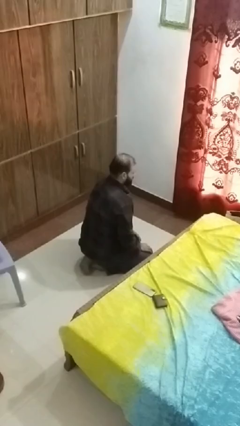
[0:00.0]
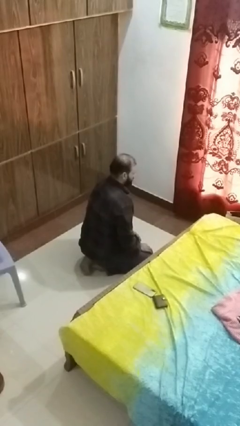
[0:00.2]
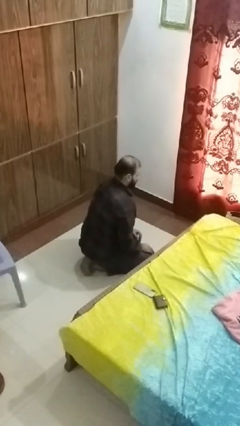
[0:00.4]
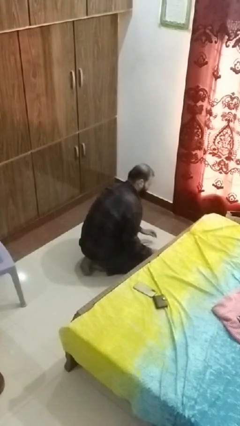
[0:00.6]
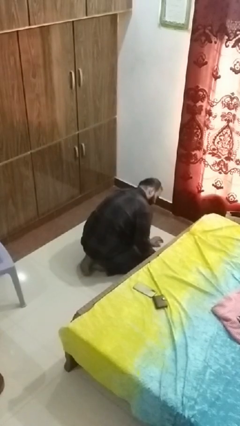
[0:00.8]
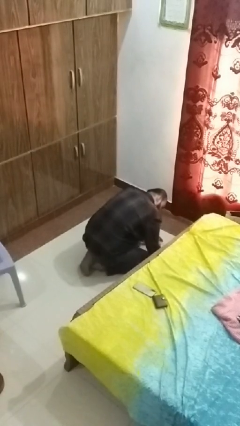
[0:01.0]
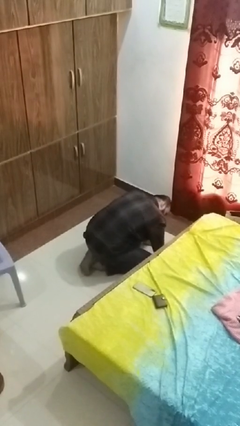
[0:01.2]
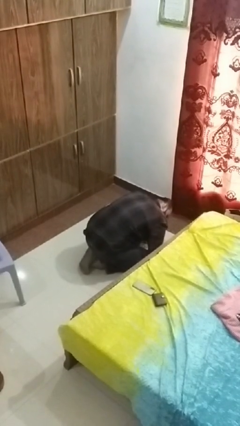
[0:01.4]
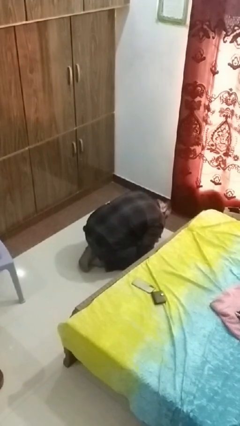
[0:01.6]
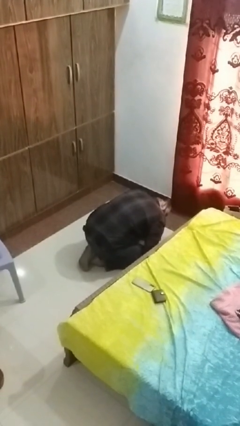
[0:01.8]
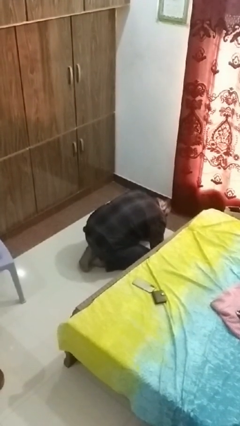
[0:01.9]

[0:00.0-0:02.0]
person searches under bed

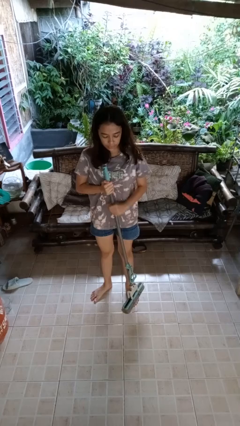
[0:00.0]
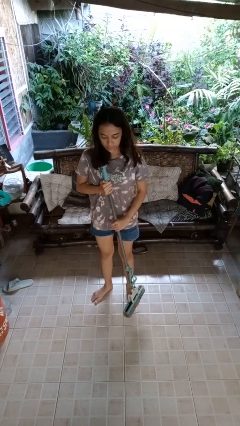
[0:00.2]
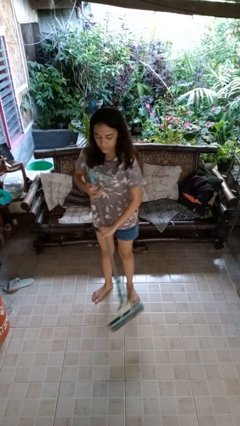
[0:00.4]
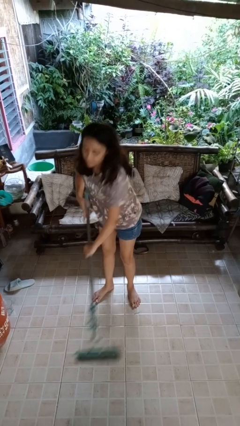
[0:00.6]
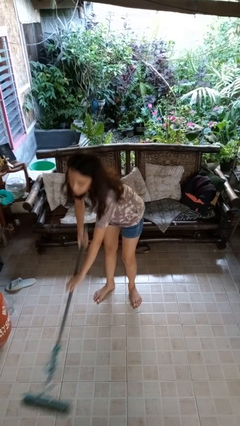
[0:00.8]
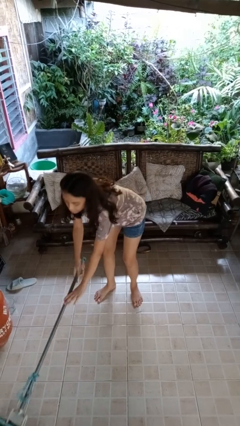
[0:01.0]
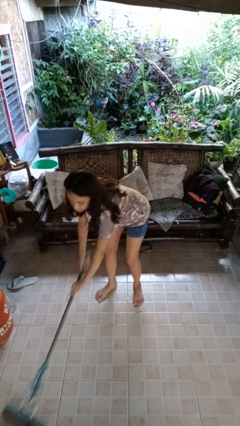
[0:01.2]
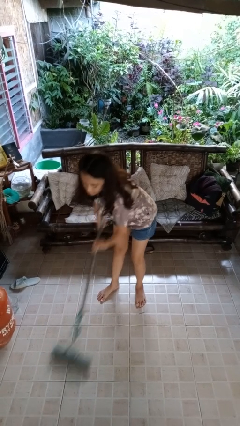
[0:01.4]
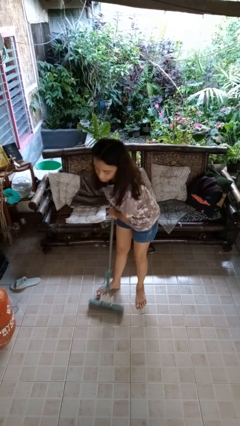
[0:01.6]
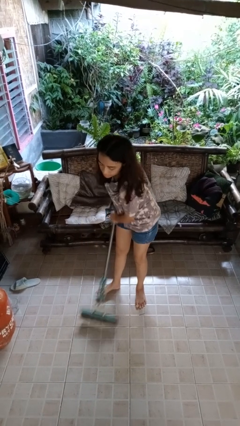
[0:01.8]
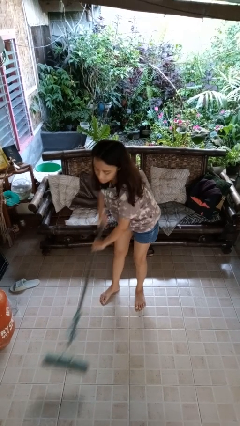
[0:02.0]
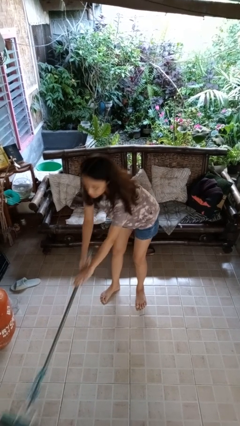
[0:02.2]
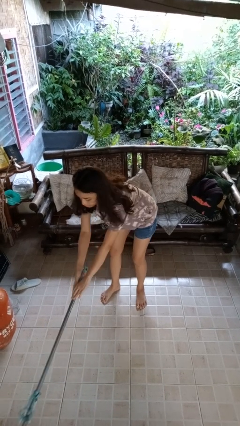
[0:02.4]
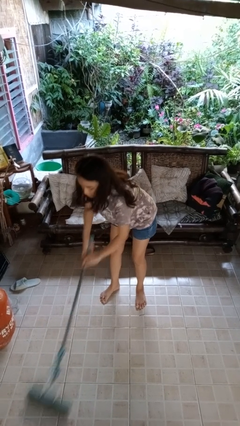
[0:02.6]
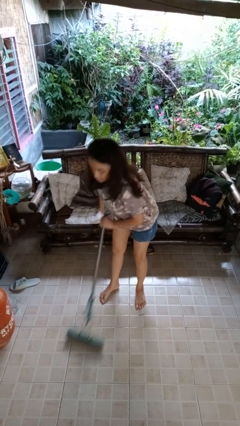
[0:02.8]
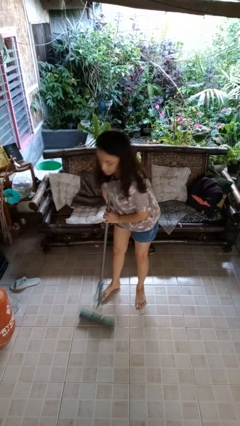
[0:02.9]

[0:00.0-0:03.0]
person mops

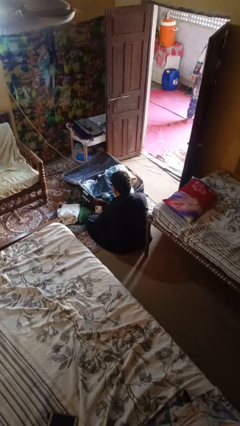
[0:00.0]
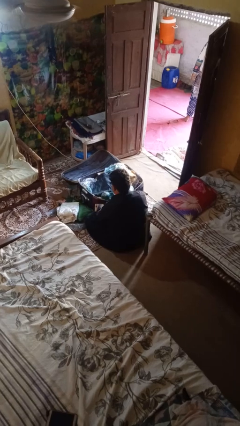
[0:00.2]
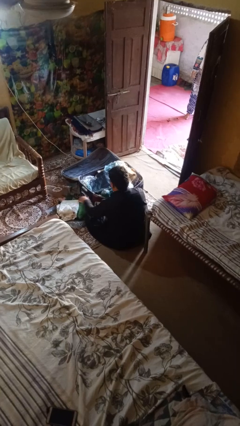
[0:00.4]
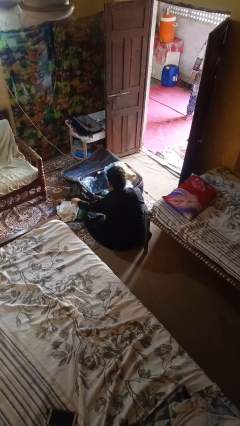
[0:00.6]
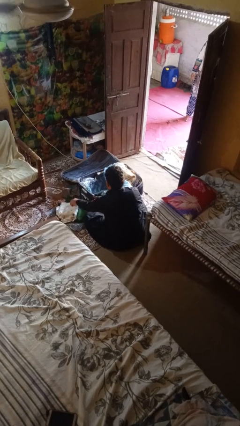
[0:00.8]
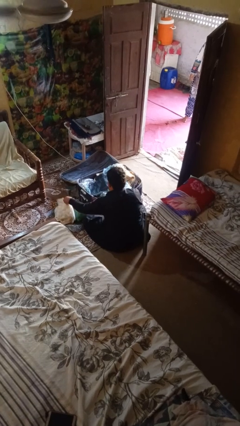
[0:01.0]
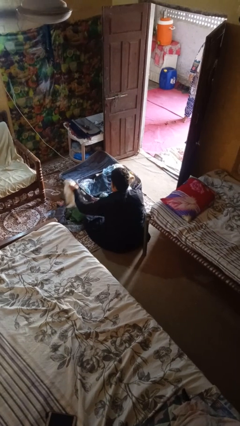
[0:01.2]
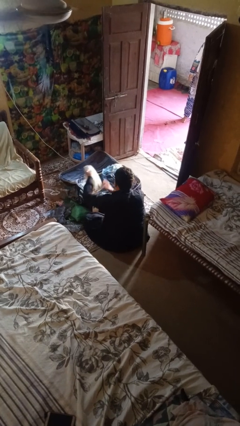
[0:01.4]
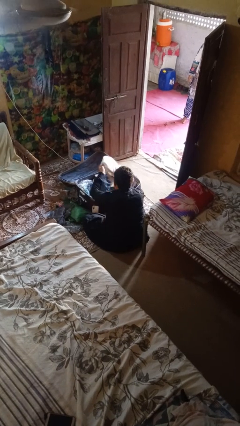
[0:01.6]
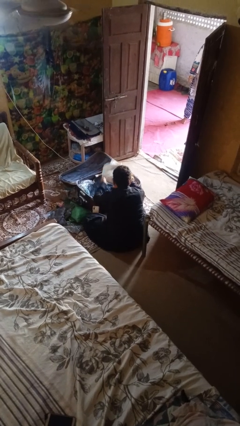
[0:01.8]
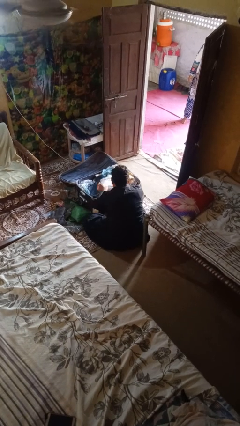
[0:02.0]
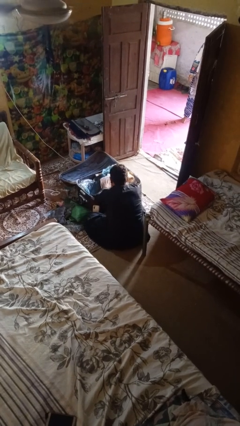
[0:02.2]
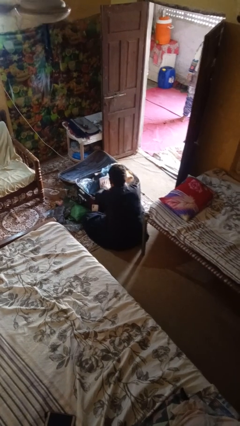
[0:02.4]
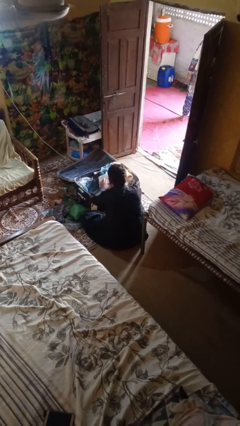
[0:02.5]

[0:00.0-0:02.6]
person loads clothes into suitcase

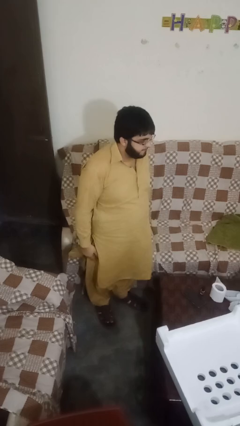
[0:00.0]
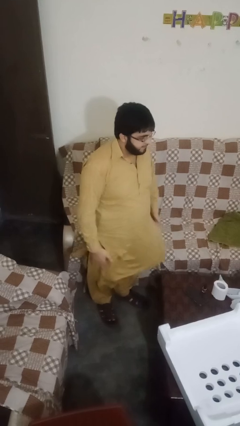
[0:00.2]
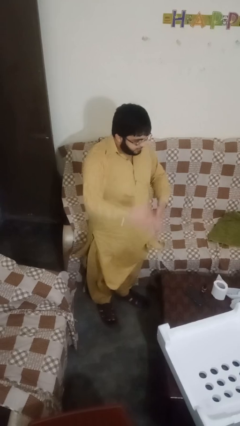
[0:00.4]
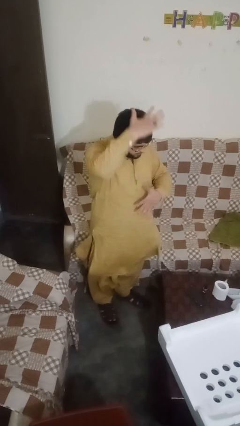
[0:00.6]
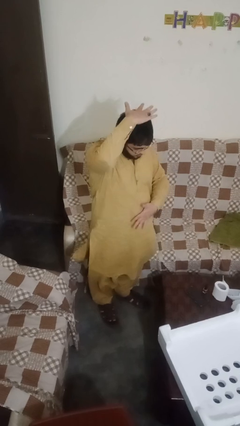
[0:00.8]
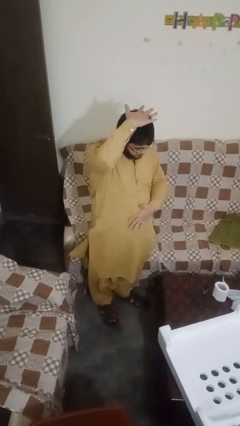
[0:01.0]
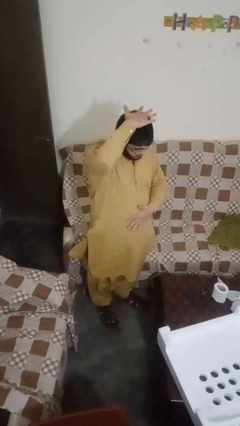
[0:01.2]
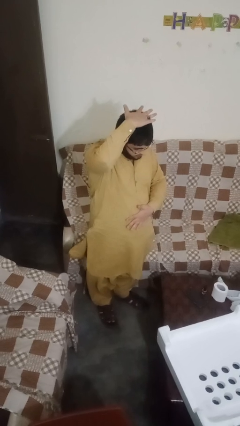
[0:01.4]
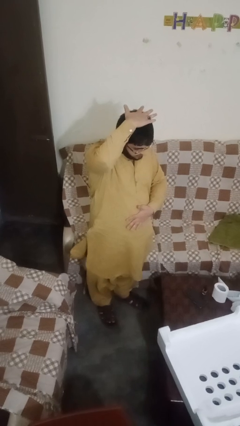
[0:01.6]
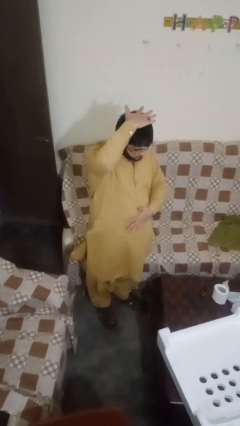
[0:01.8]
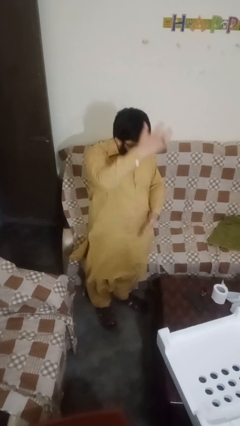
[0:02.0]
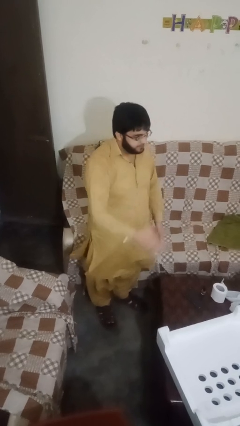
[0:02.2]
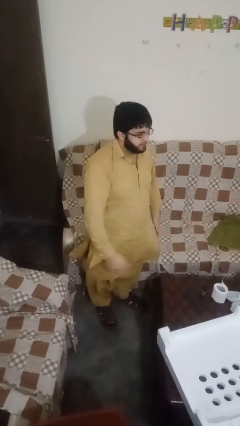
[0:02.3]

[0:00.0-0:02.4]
person pats head

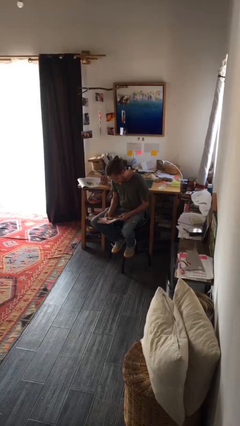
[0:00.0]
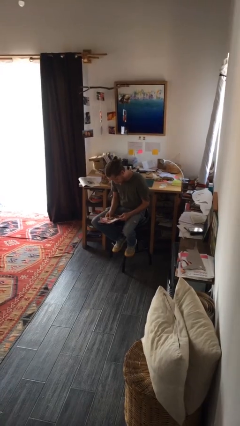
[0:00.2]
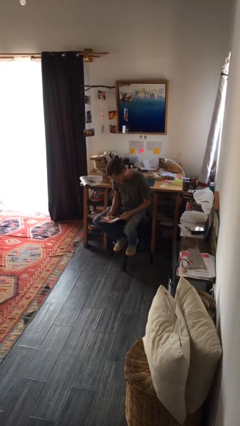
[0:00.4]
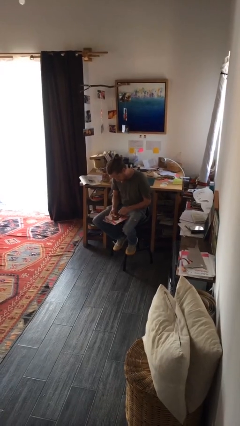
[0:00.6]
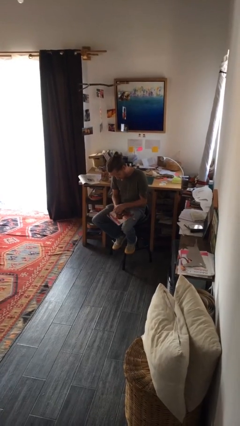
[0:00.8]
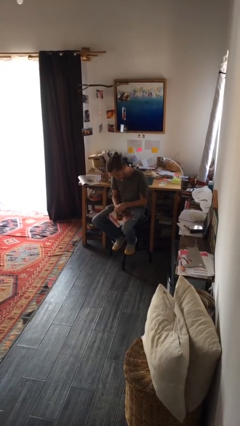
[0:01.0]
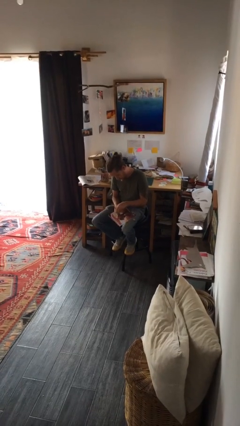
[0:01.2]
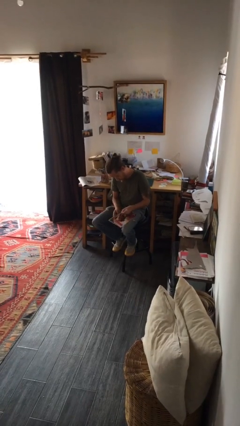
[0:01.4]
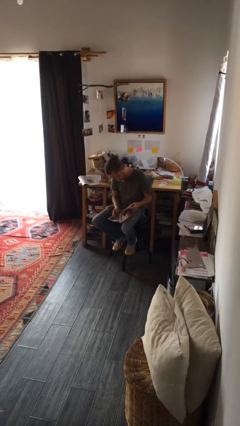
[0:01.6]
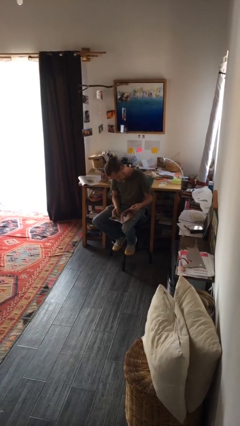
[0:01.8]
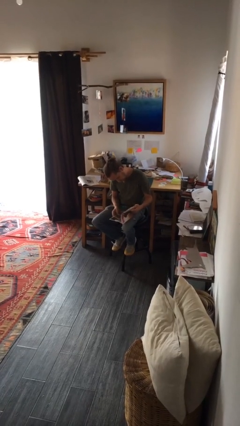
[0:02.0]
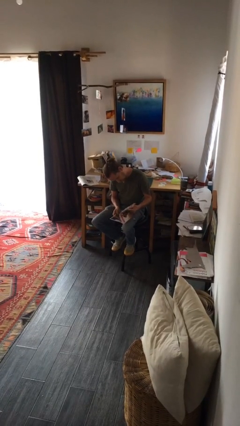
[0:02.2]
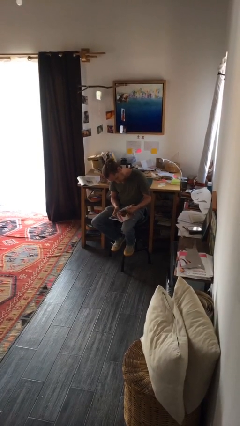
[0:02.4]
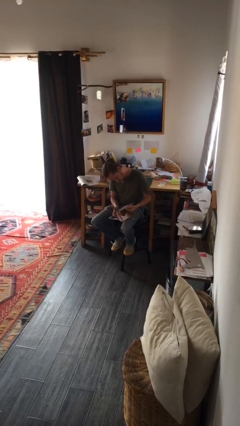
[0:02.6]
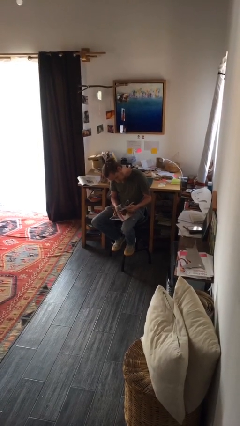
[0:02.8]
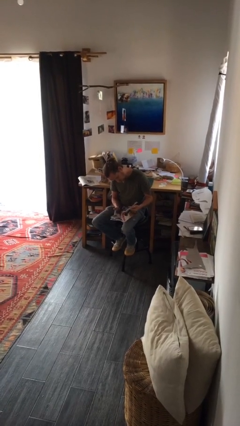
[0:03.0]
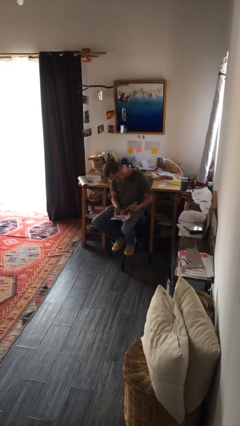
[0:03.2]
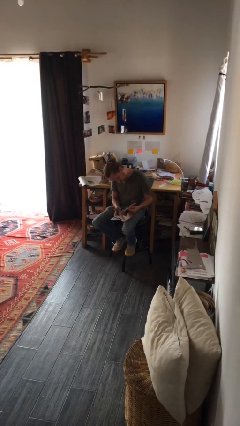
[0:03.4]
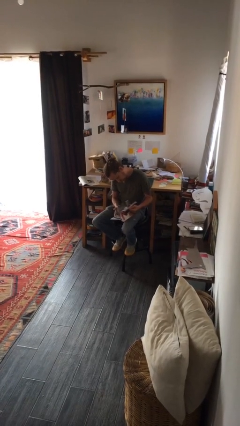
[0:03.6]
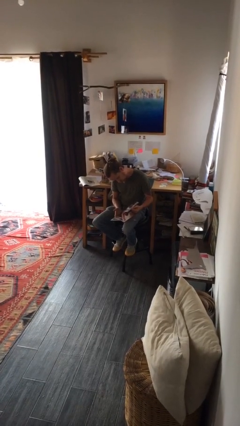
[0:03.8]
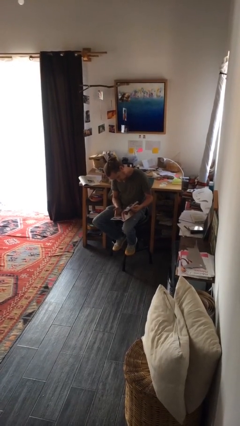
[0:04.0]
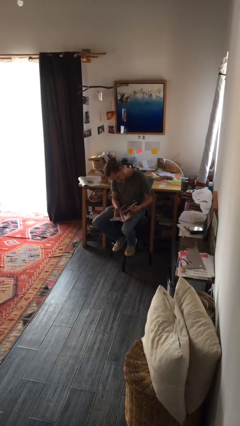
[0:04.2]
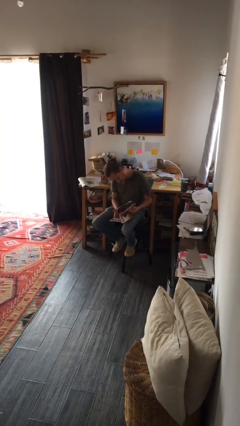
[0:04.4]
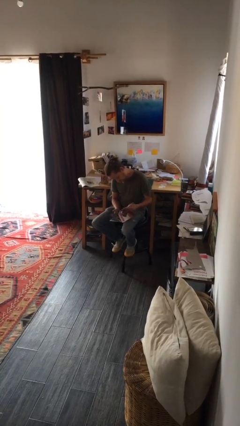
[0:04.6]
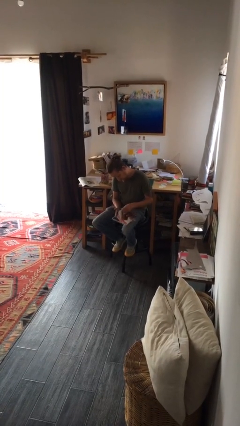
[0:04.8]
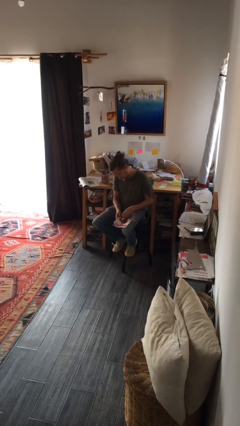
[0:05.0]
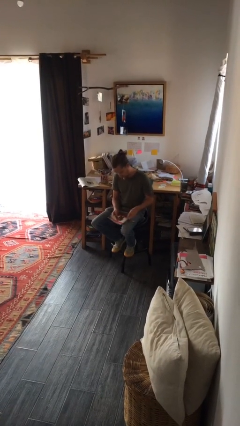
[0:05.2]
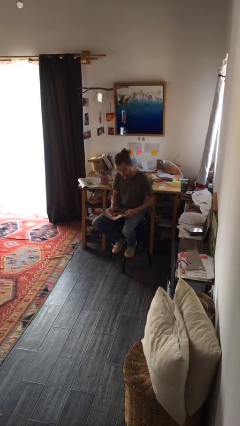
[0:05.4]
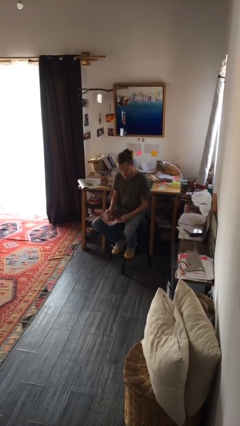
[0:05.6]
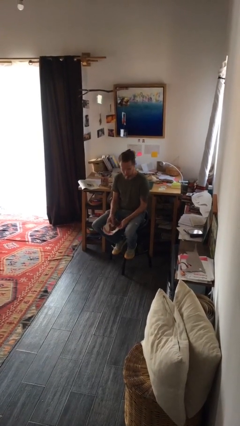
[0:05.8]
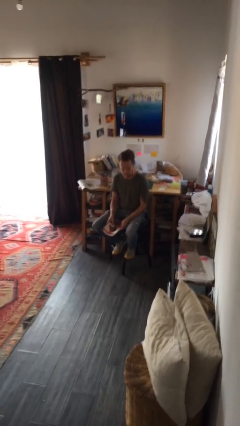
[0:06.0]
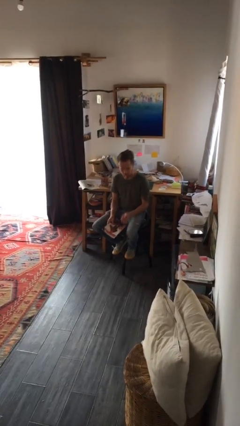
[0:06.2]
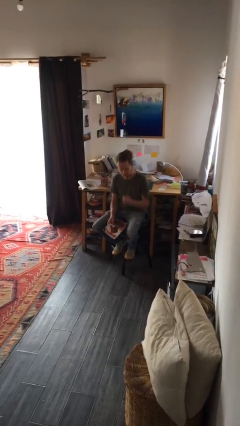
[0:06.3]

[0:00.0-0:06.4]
person reads magazine

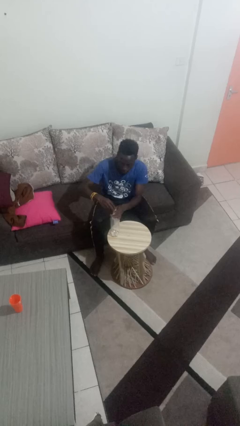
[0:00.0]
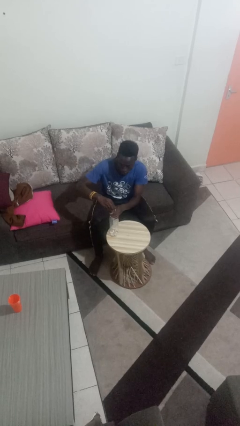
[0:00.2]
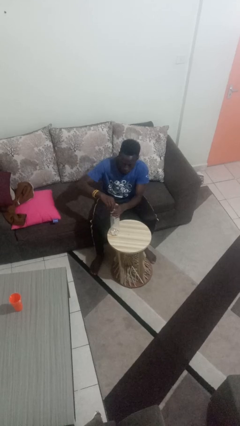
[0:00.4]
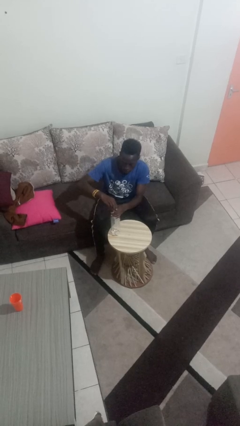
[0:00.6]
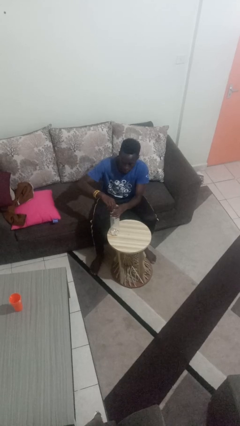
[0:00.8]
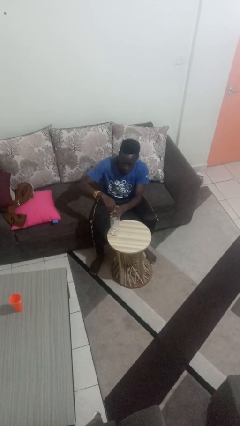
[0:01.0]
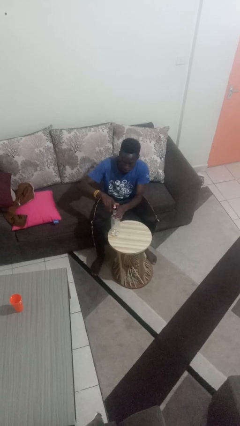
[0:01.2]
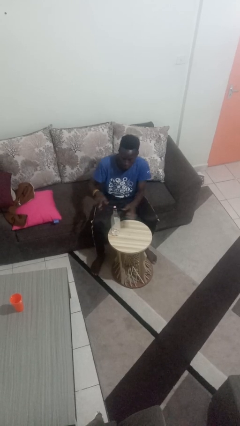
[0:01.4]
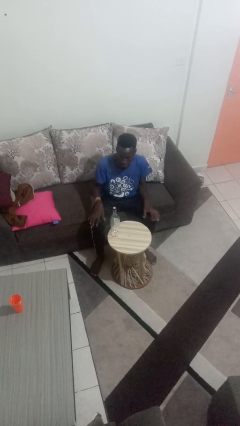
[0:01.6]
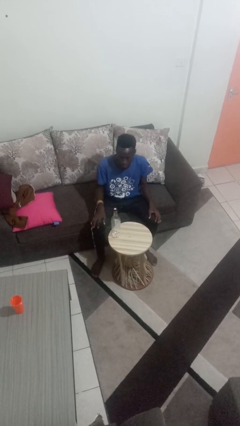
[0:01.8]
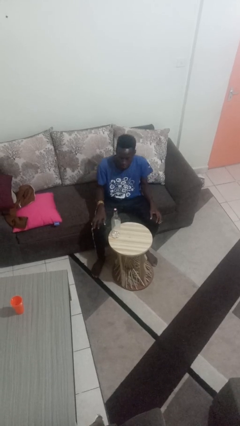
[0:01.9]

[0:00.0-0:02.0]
person screws lid to bottle
